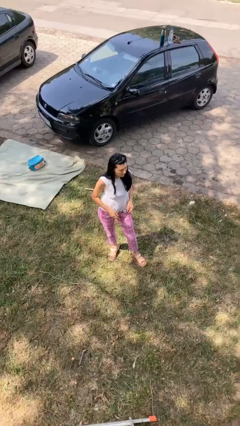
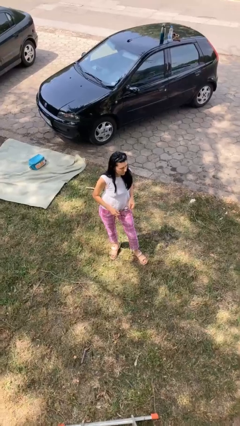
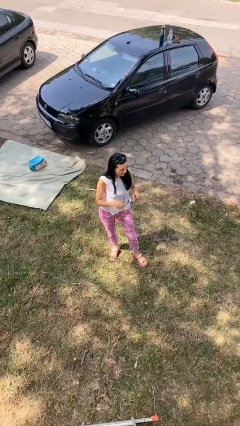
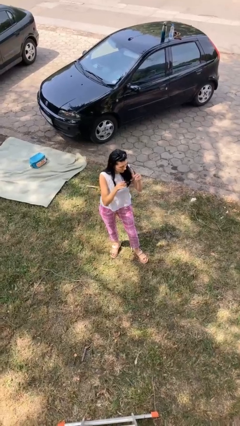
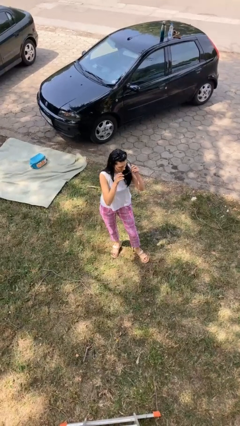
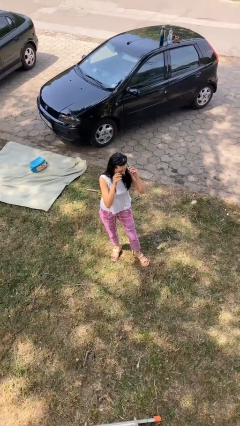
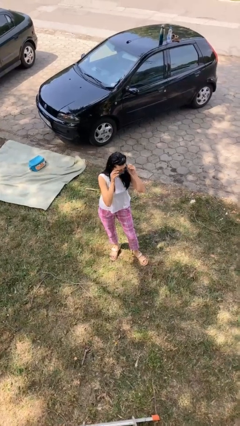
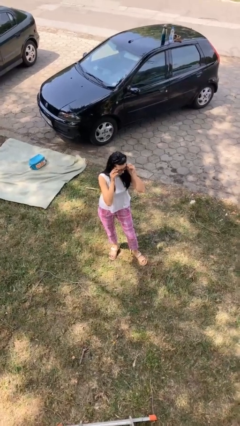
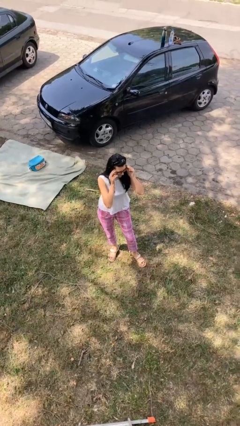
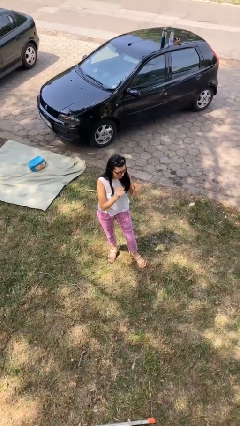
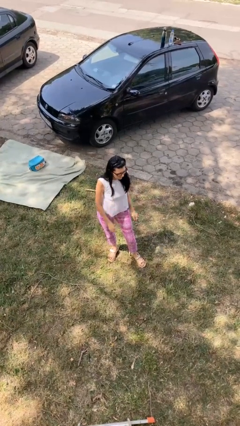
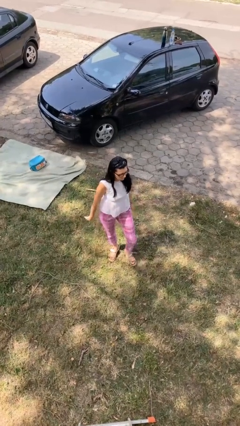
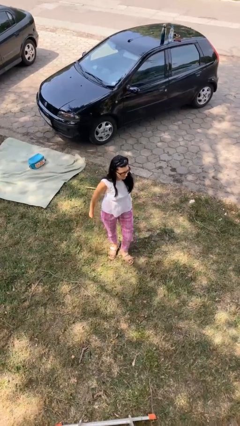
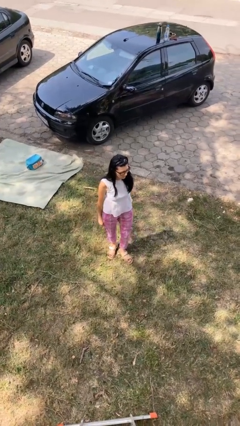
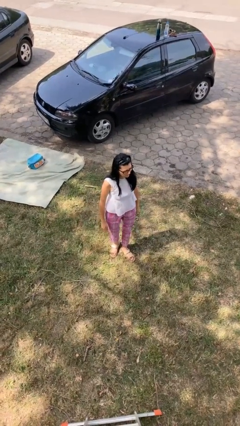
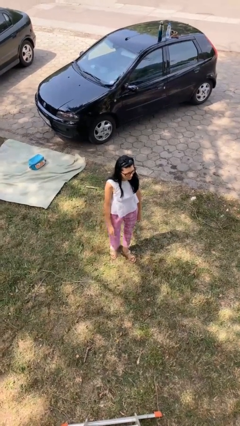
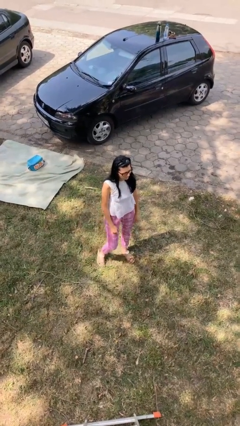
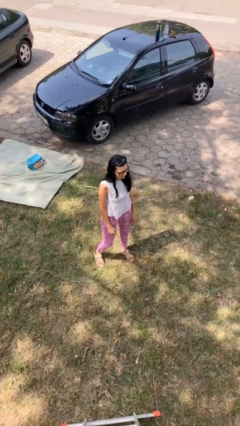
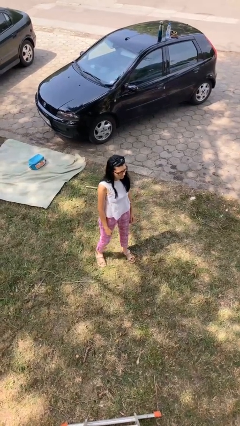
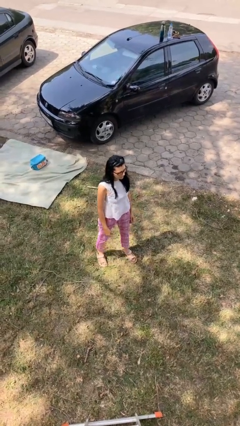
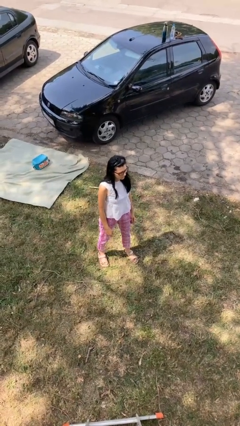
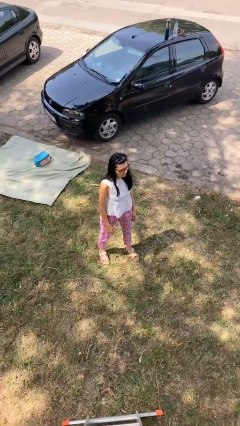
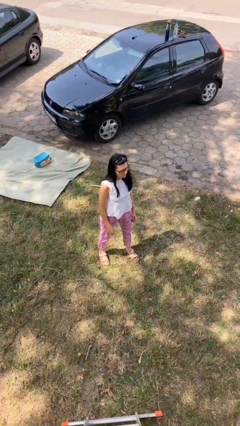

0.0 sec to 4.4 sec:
person puts on glasses

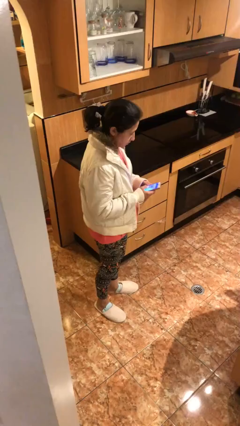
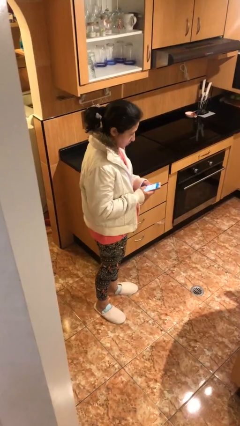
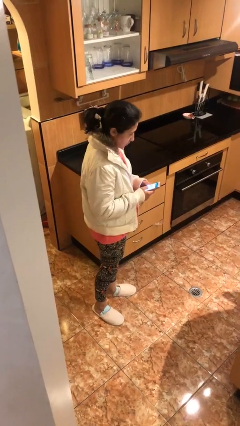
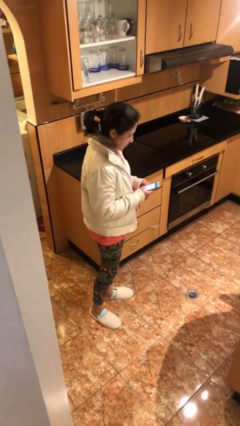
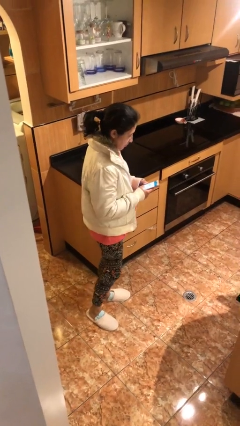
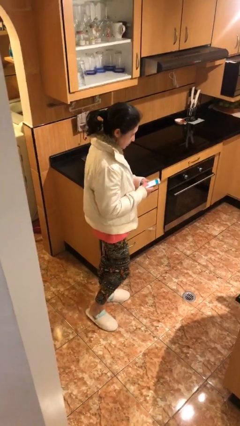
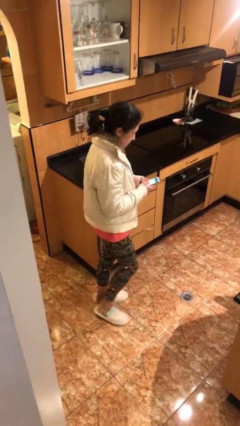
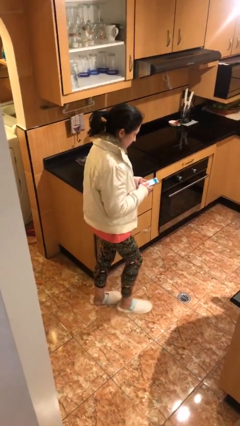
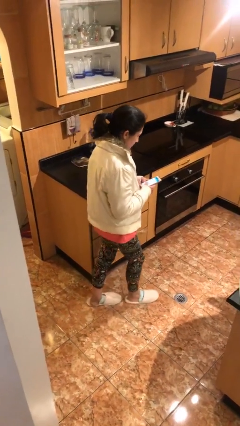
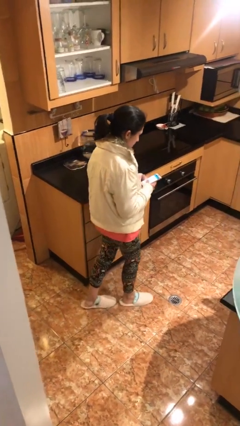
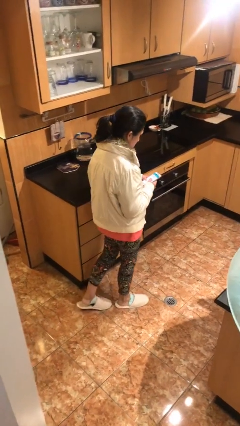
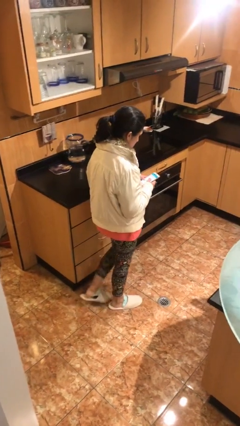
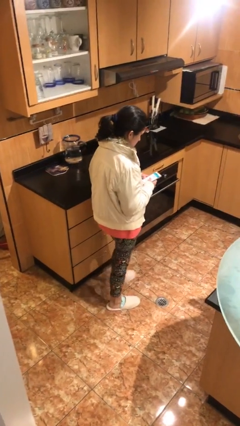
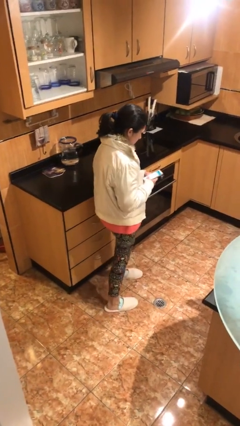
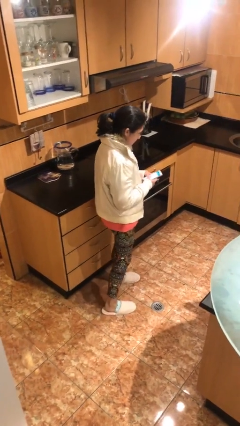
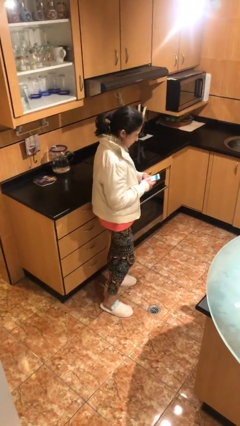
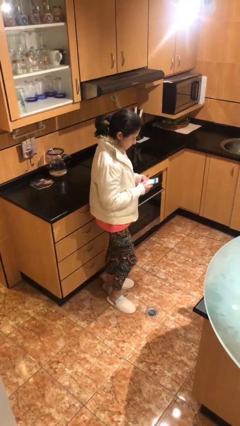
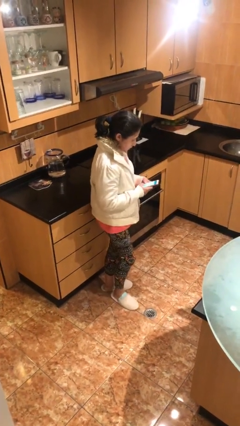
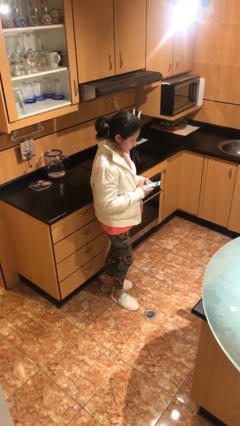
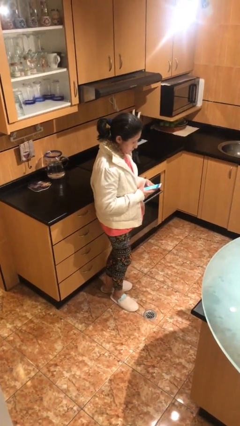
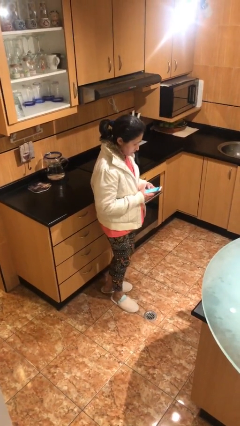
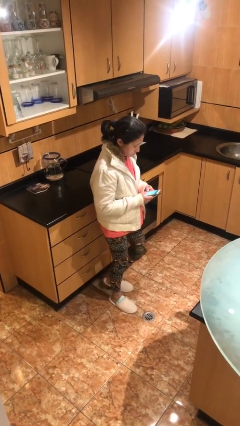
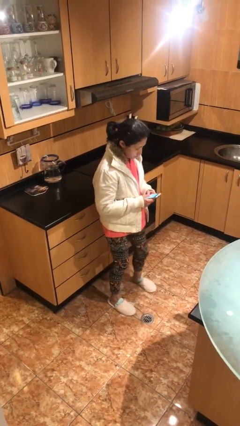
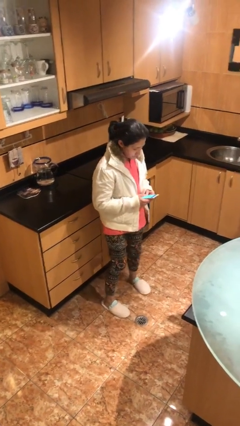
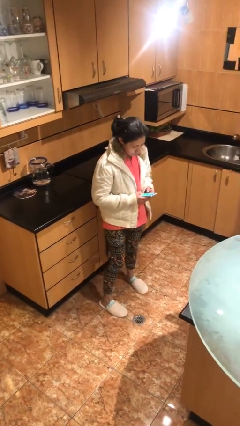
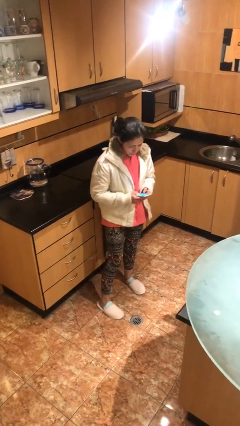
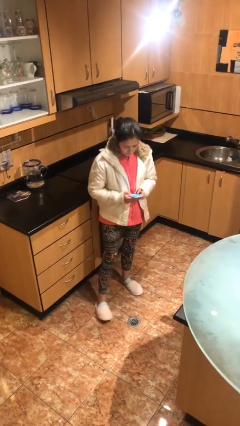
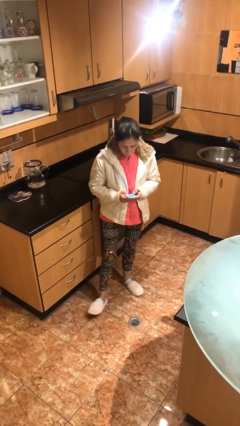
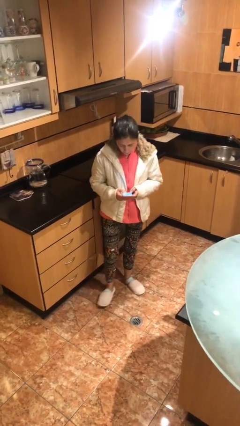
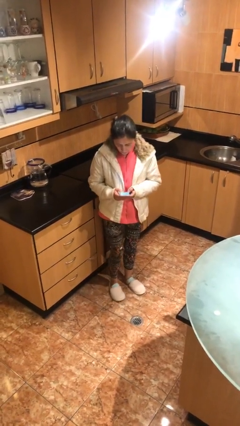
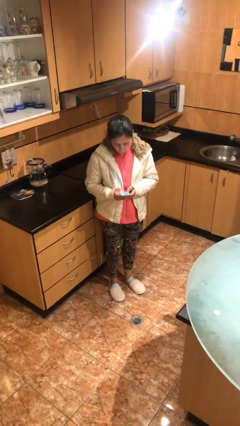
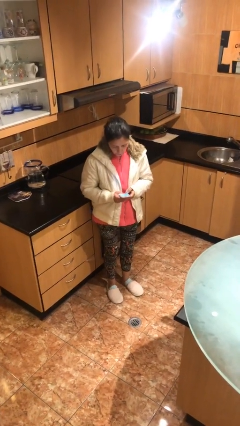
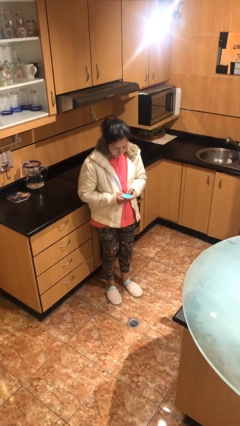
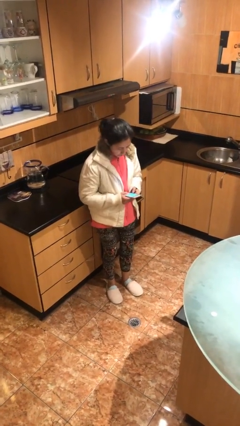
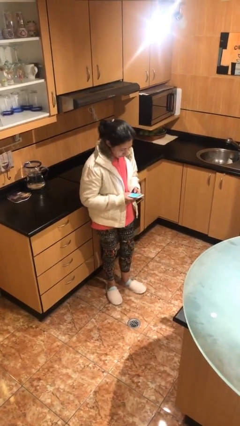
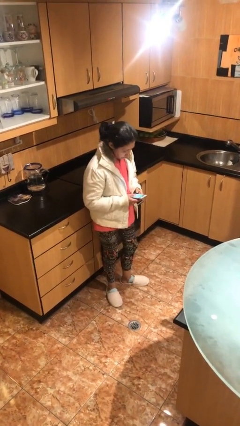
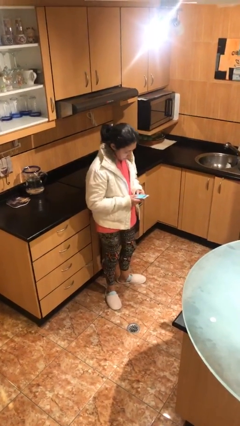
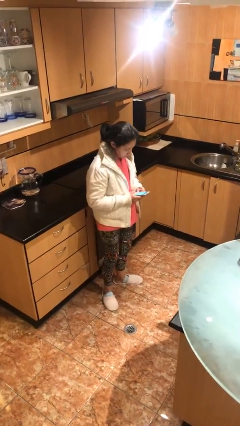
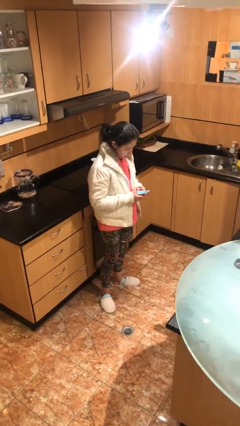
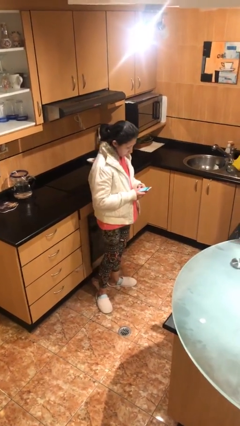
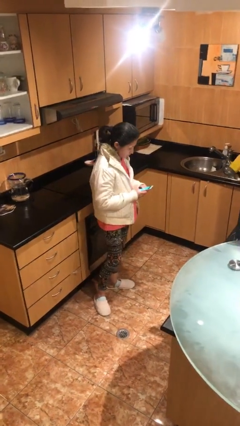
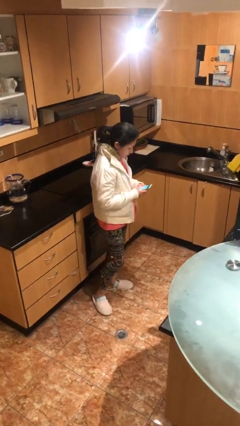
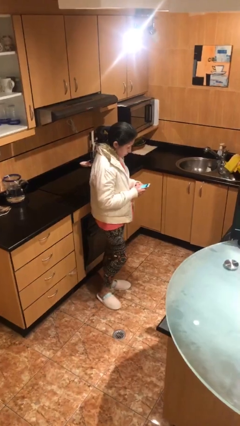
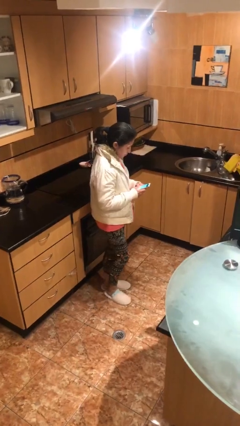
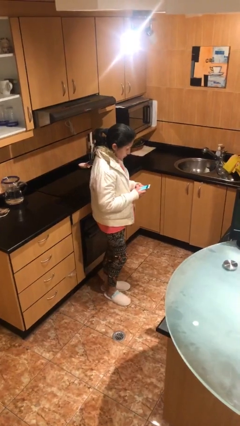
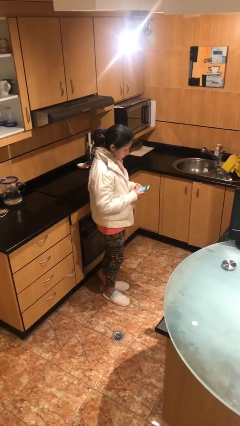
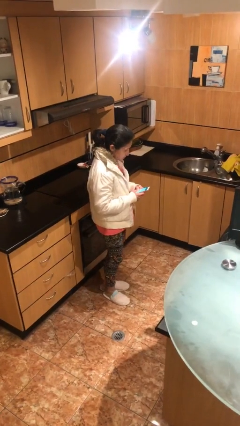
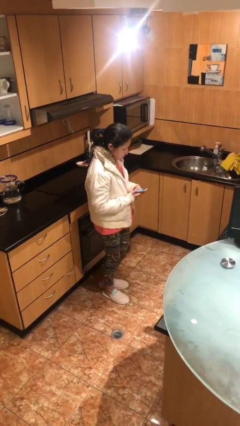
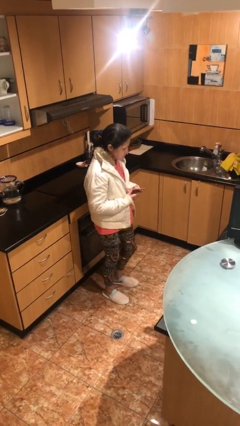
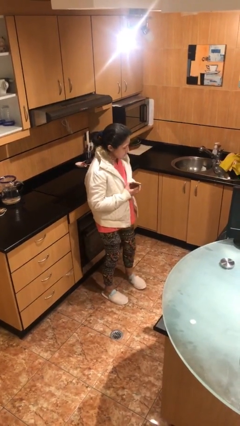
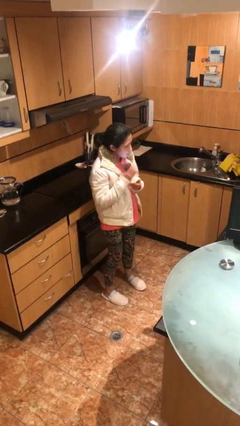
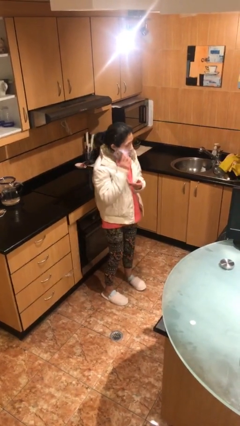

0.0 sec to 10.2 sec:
person texts on phone

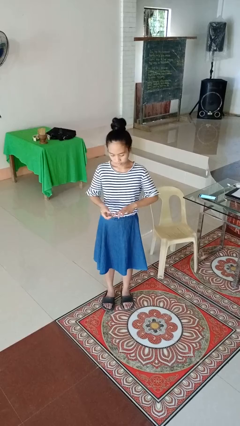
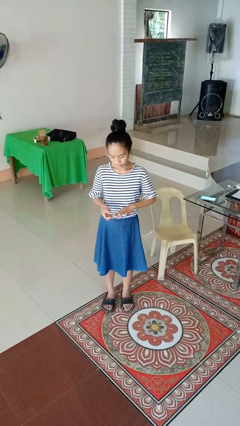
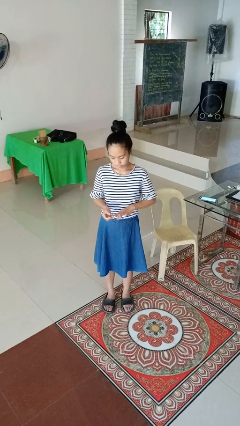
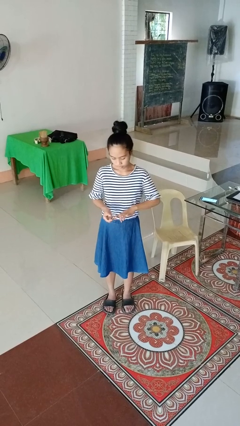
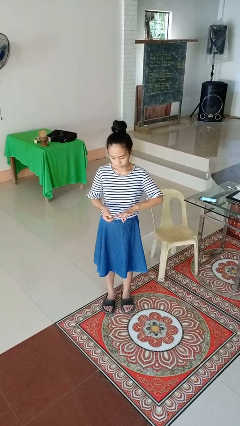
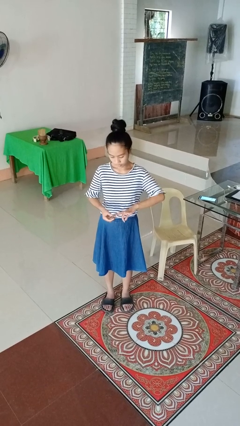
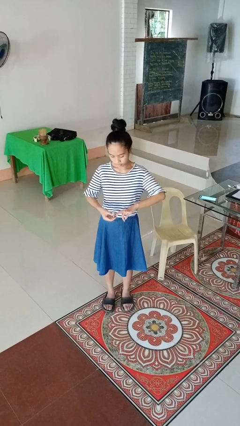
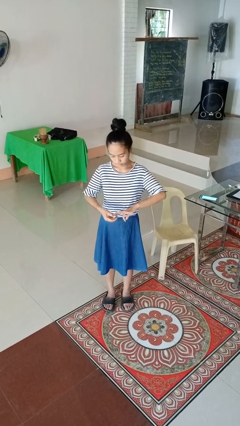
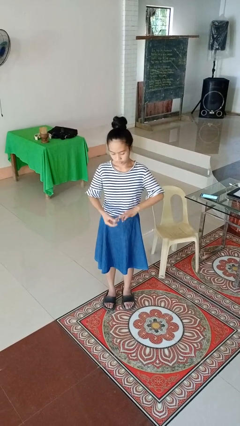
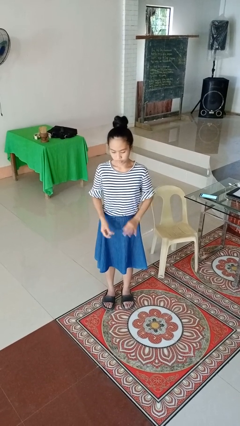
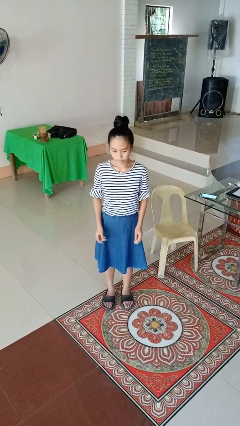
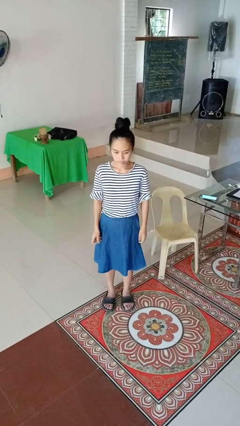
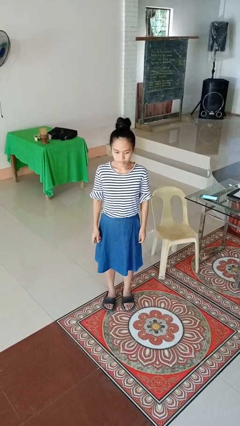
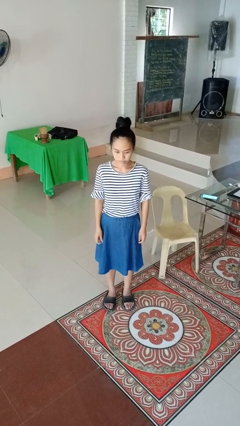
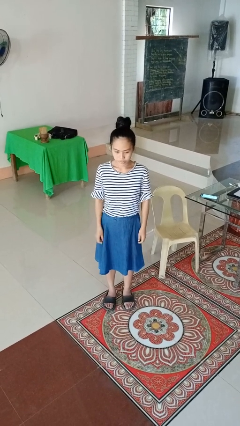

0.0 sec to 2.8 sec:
person clips fingernails
